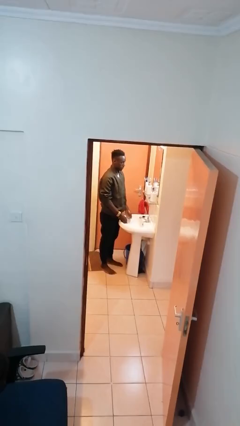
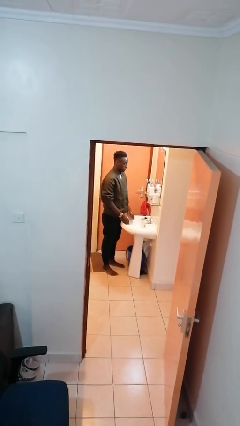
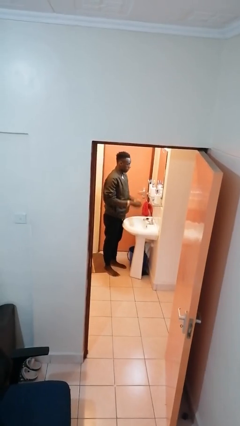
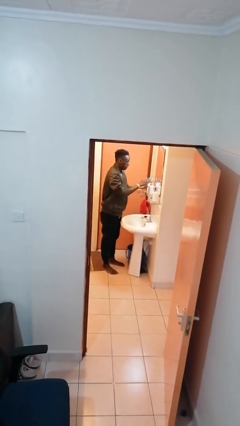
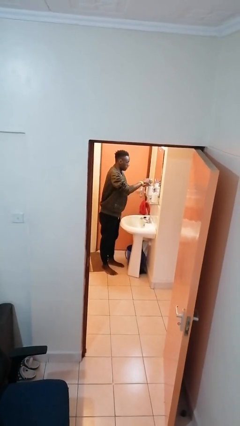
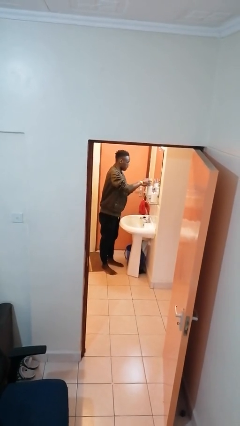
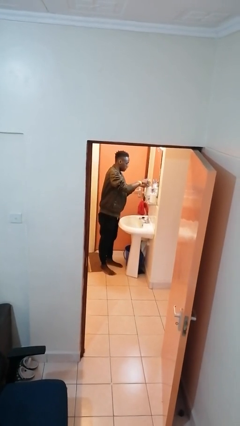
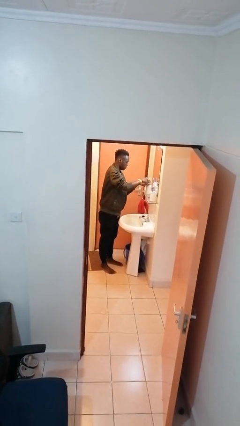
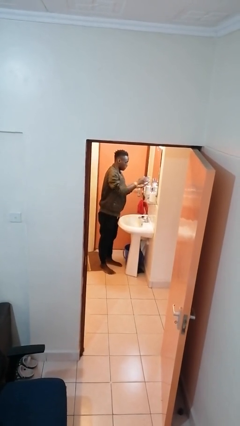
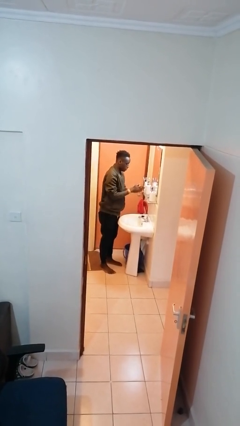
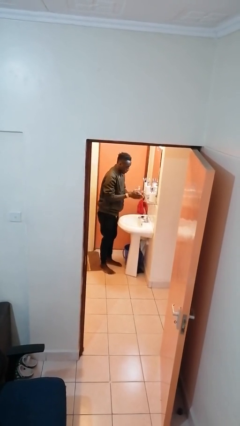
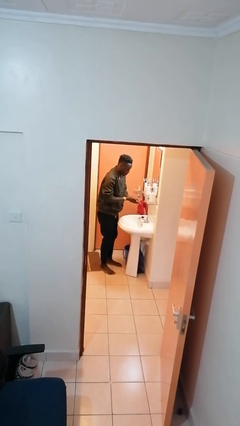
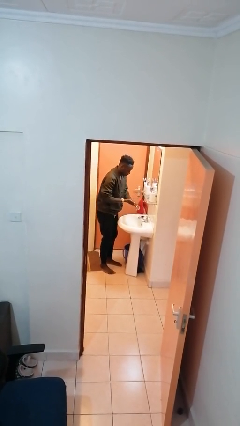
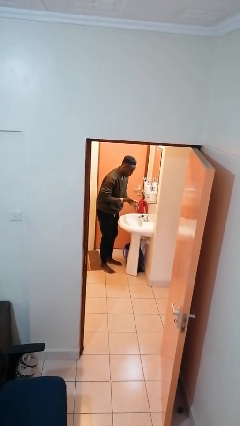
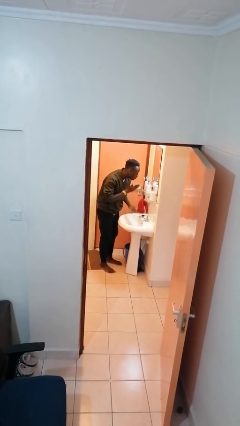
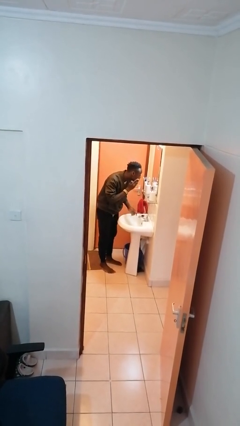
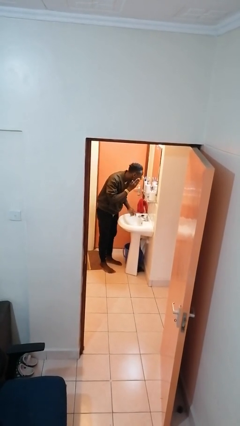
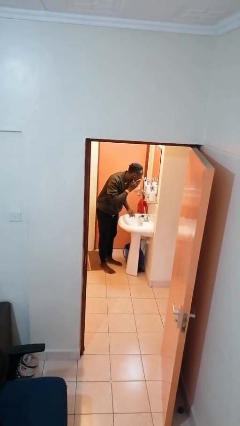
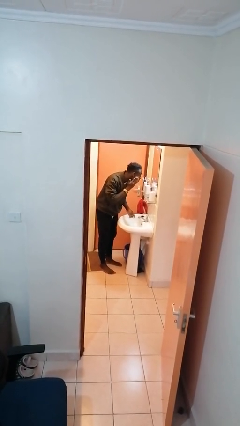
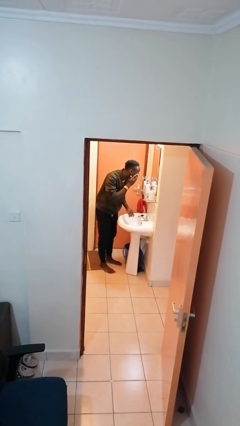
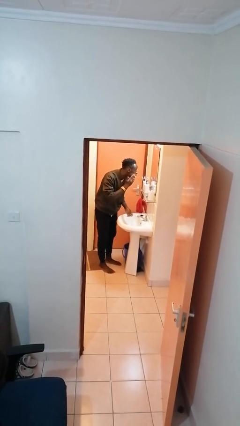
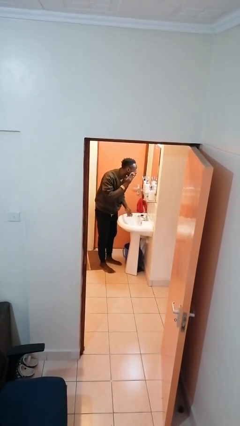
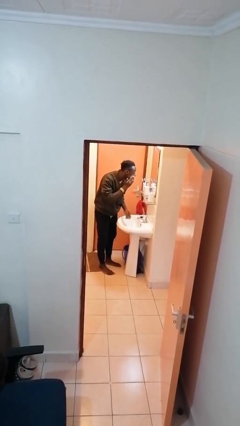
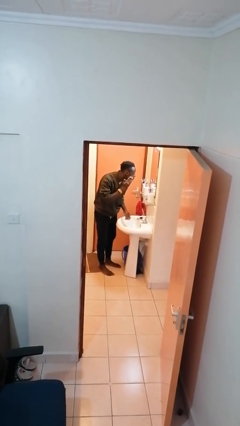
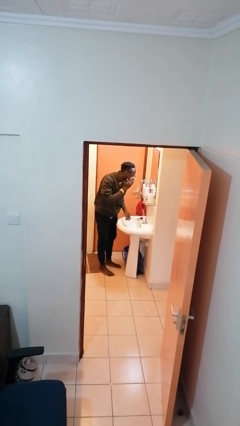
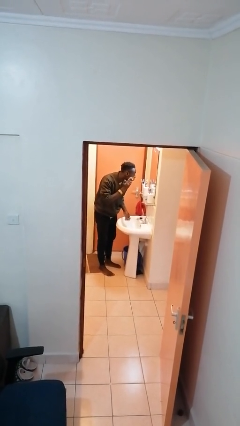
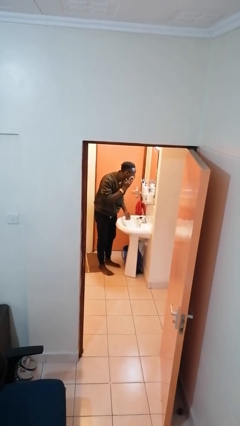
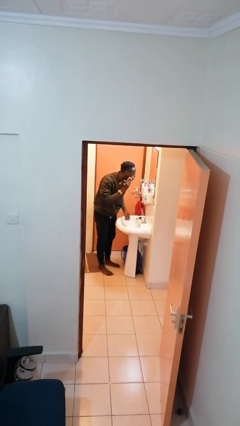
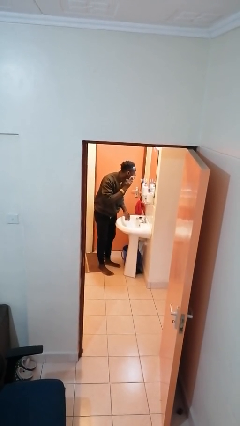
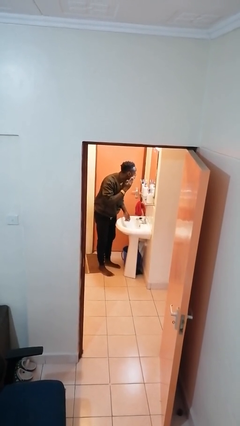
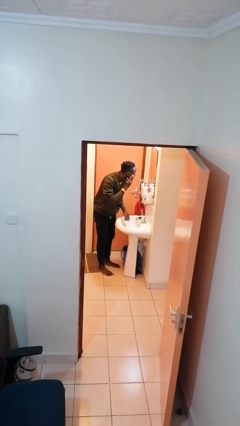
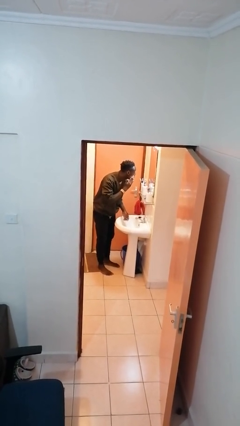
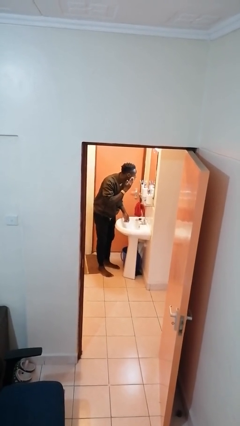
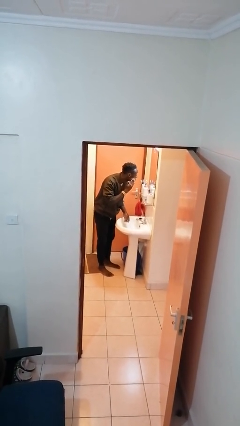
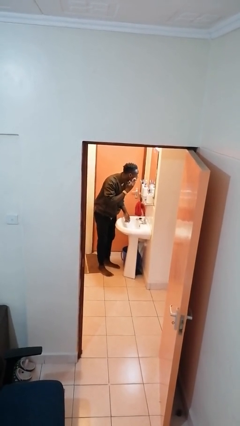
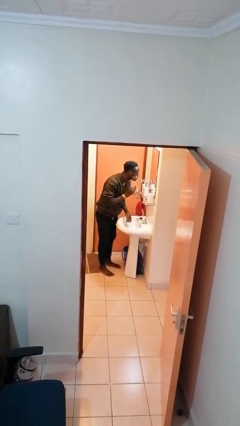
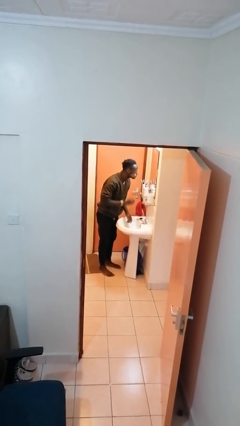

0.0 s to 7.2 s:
person applies shaving cream

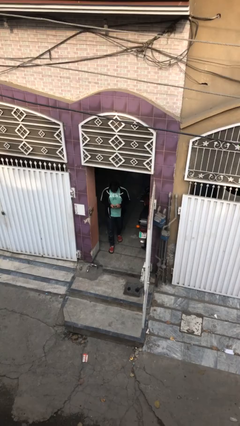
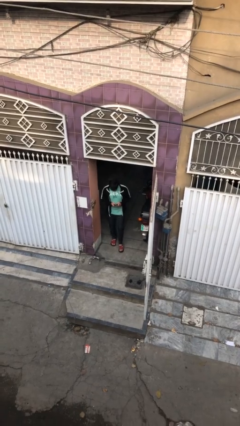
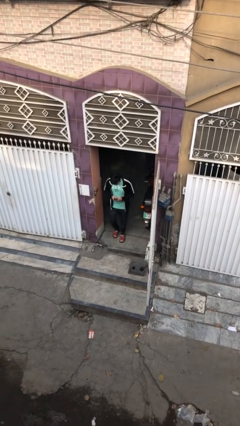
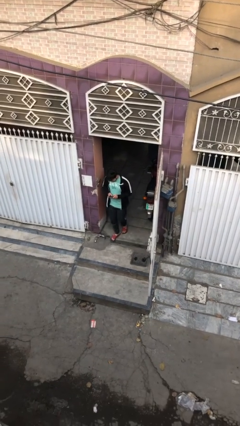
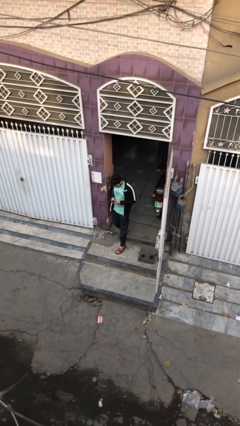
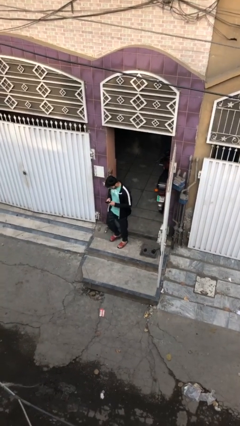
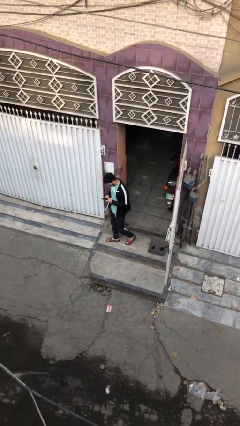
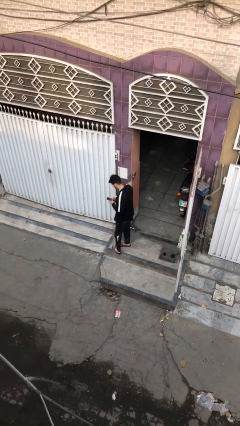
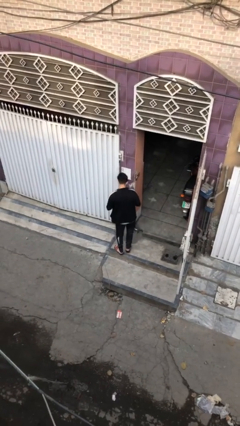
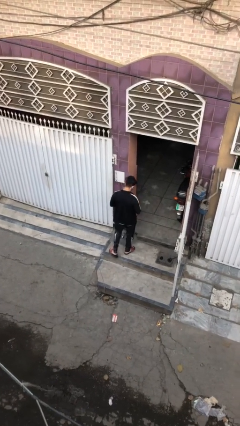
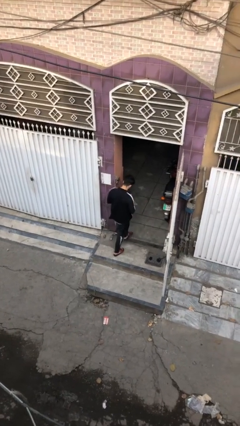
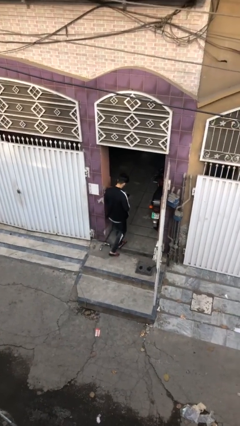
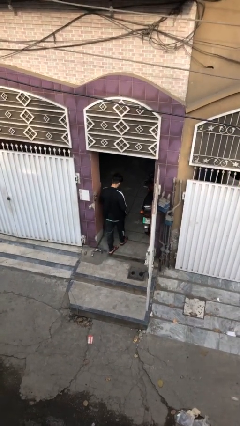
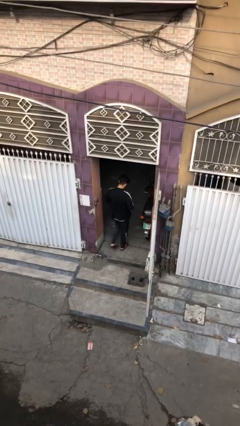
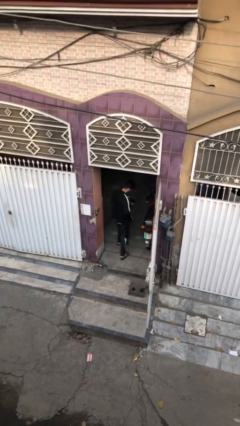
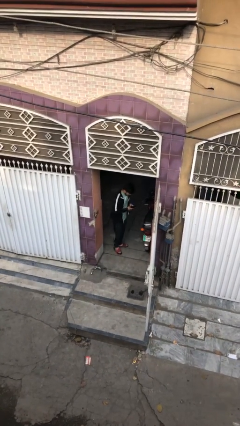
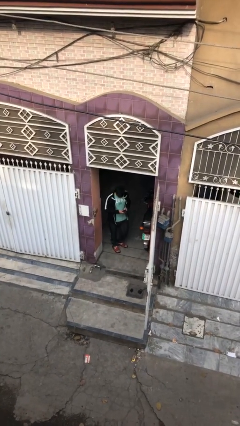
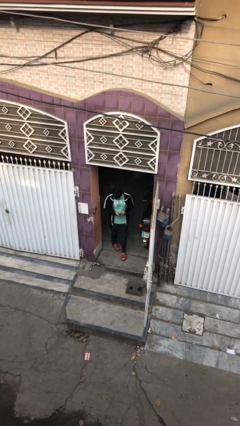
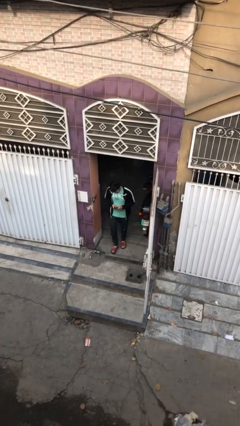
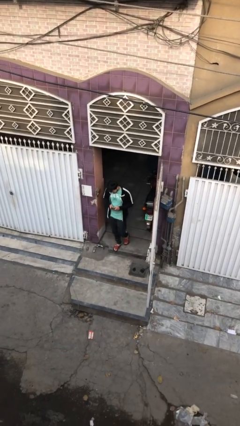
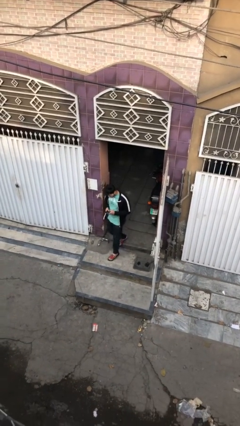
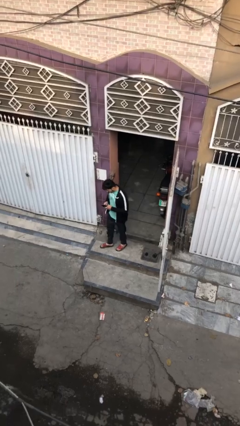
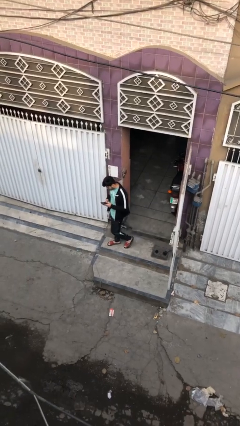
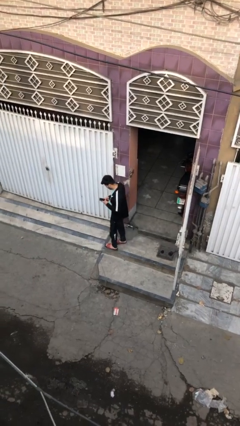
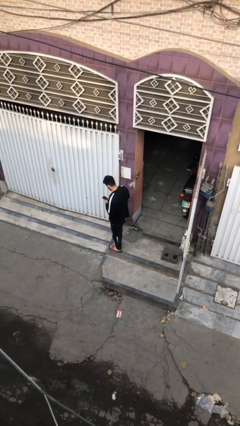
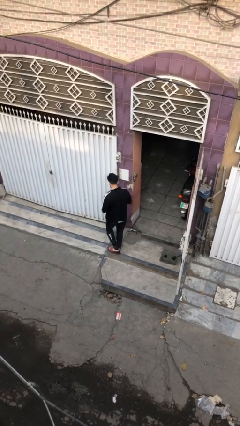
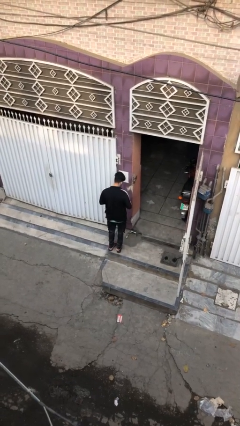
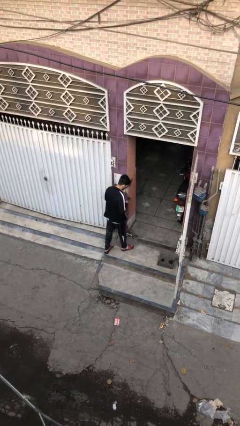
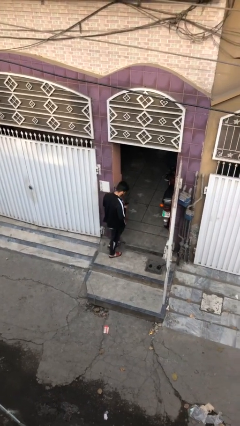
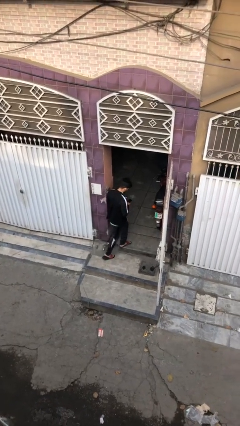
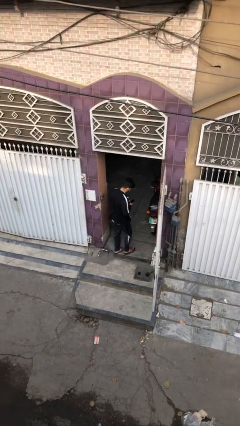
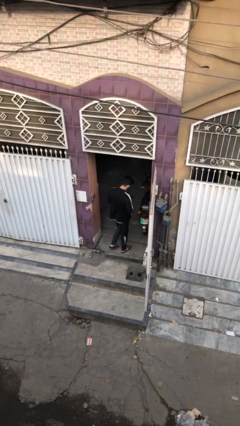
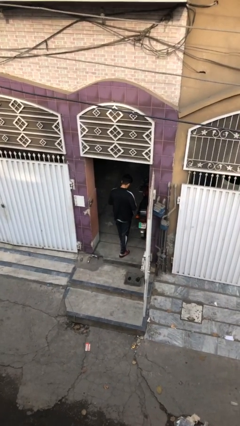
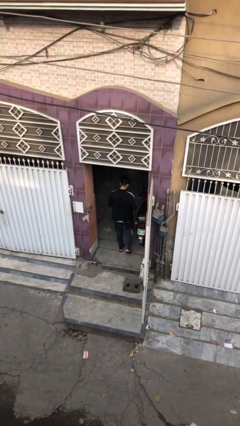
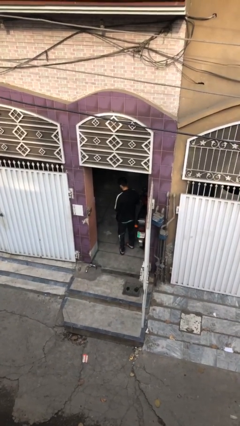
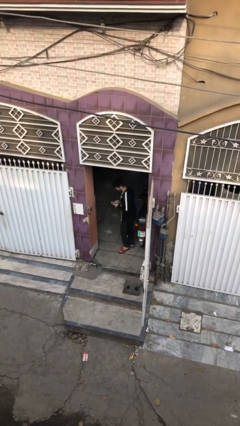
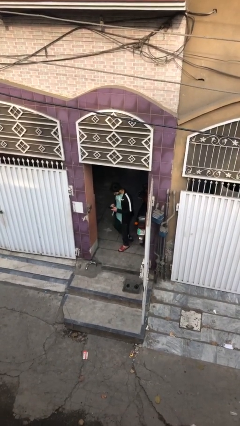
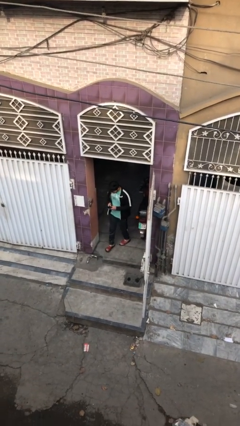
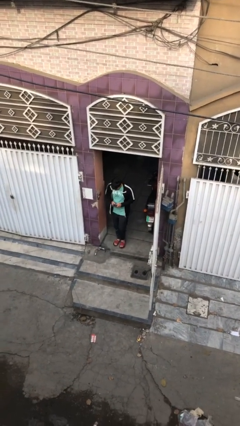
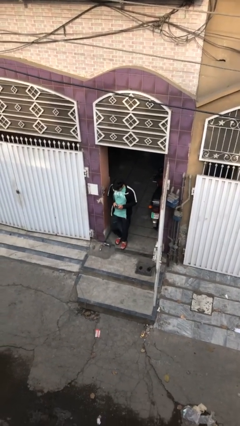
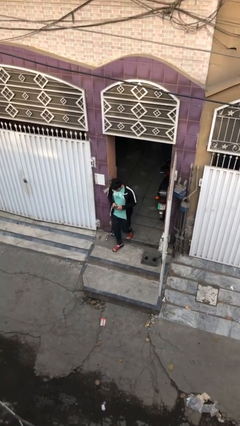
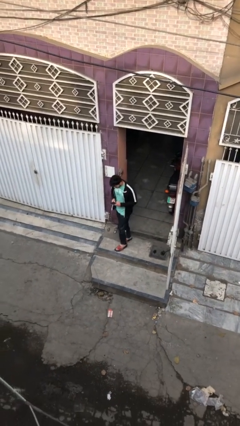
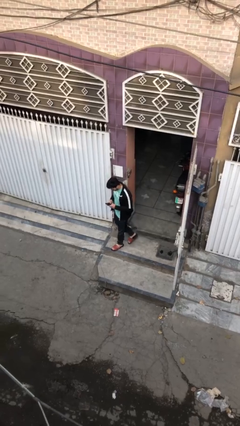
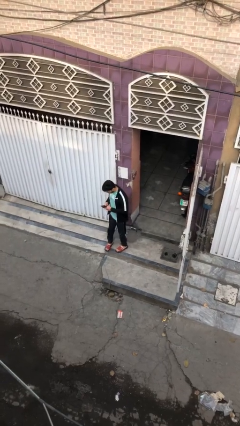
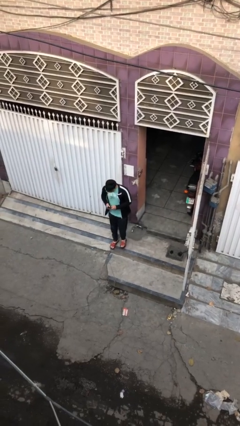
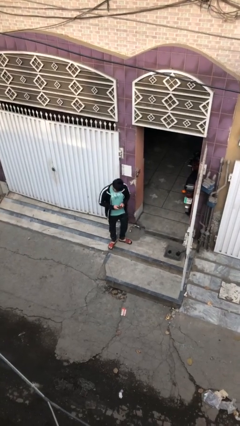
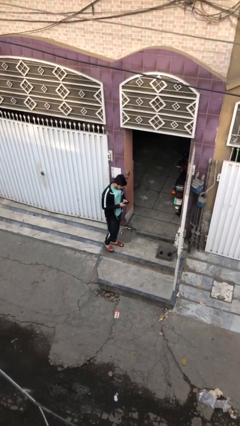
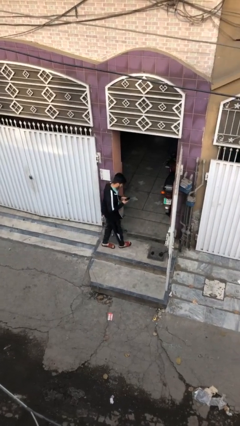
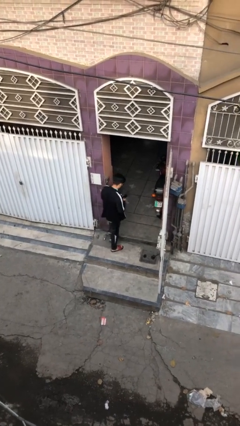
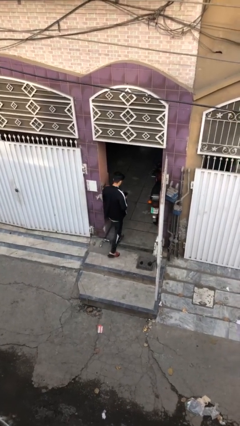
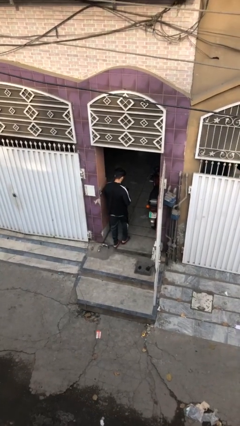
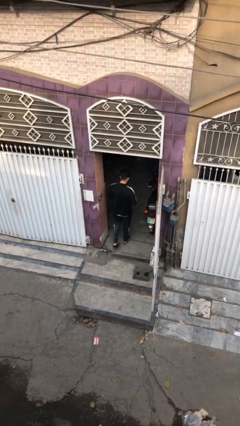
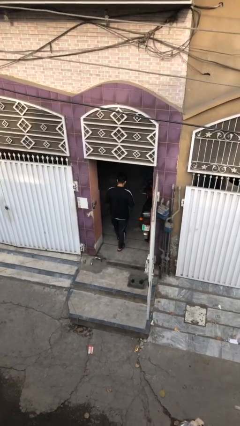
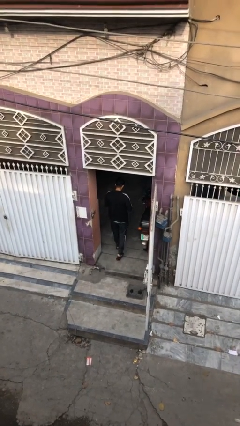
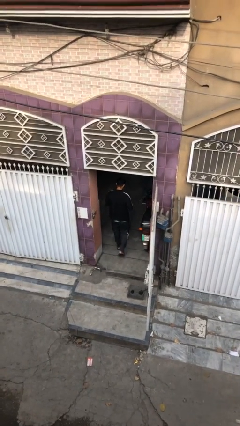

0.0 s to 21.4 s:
person texts on phone
